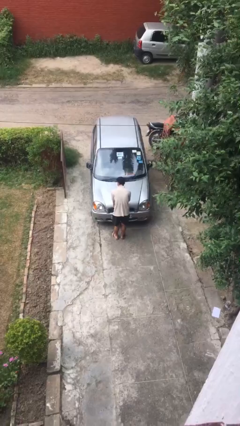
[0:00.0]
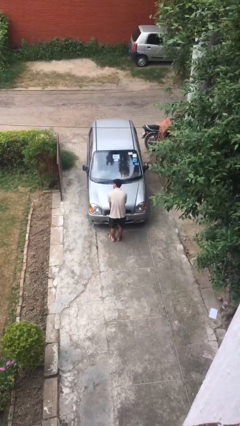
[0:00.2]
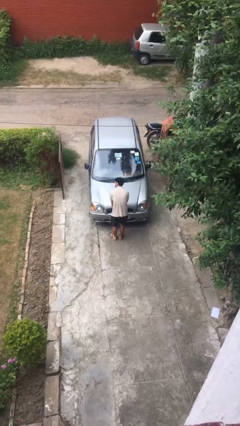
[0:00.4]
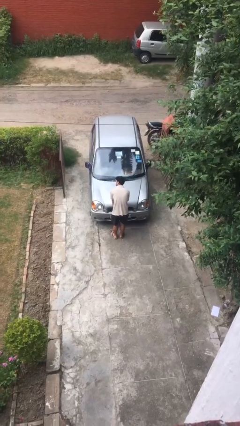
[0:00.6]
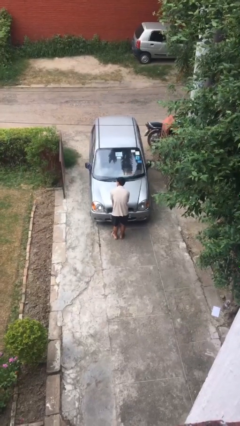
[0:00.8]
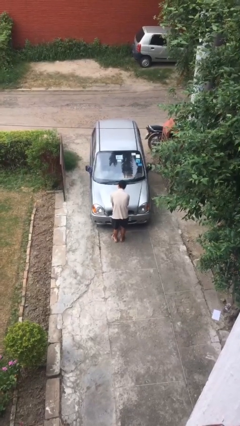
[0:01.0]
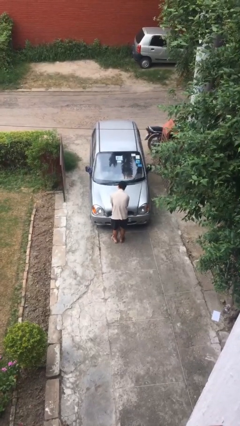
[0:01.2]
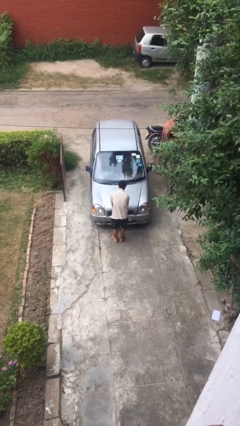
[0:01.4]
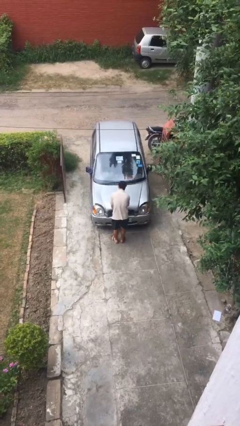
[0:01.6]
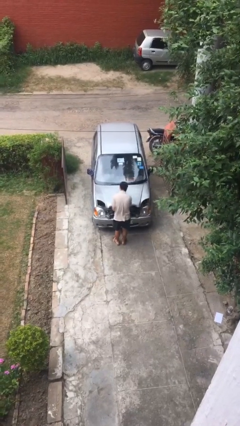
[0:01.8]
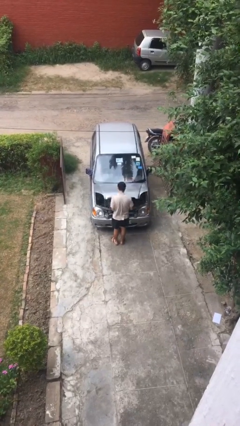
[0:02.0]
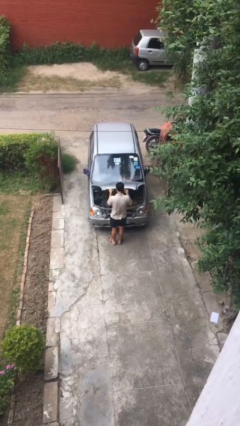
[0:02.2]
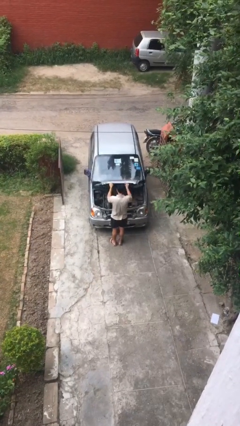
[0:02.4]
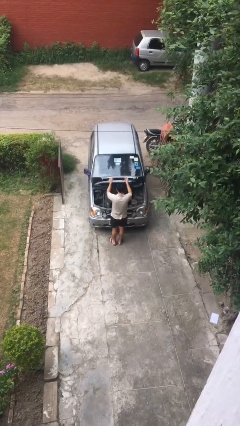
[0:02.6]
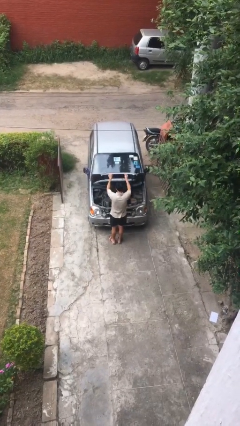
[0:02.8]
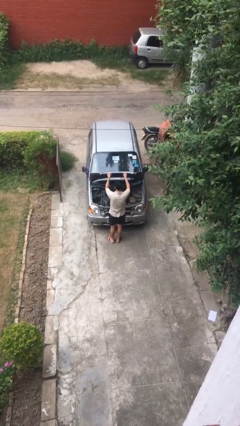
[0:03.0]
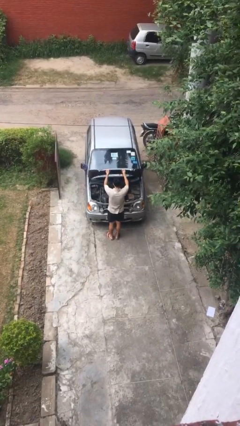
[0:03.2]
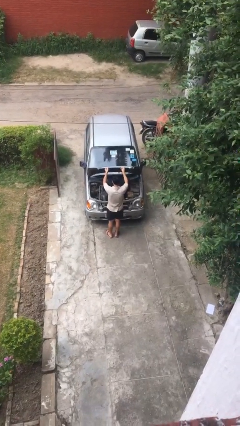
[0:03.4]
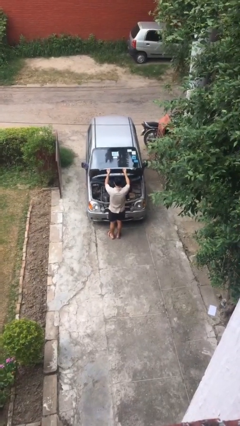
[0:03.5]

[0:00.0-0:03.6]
person opens car hood

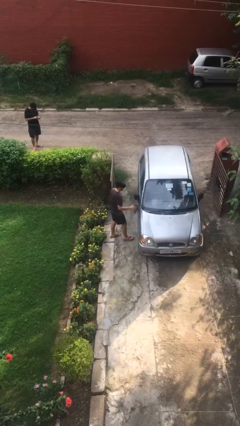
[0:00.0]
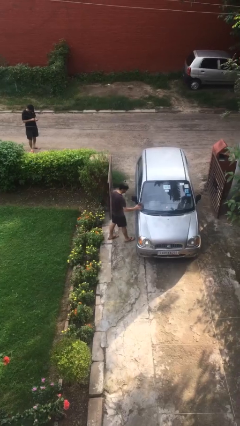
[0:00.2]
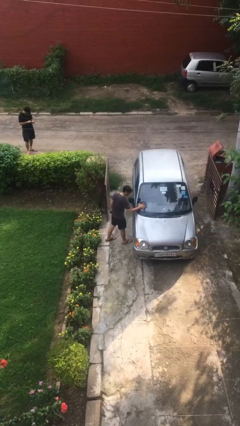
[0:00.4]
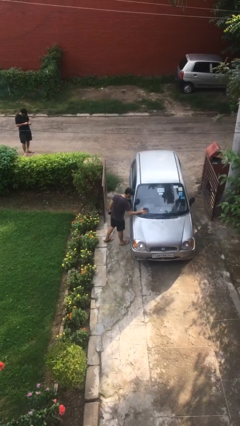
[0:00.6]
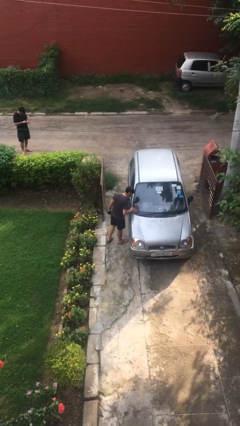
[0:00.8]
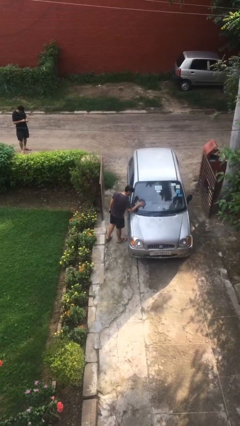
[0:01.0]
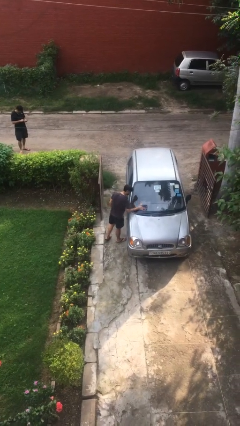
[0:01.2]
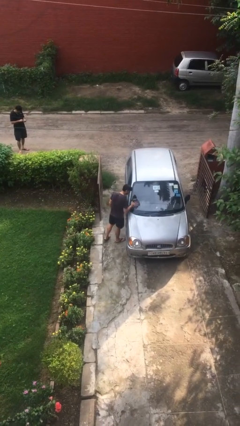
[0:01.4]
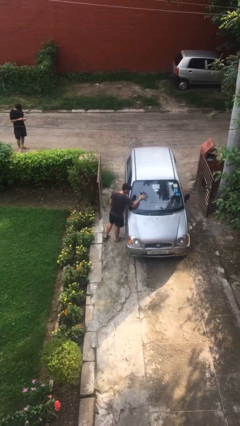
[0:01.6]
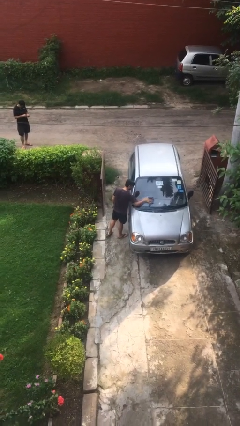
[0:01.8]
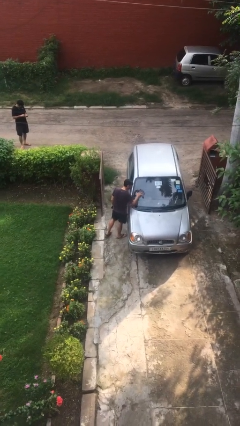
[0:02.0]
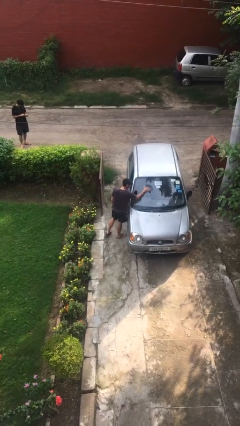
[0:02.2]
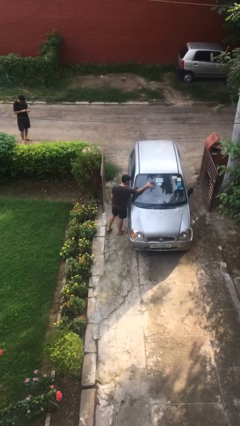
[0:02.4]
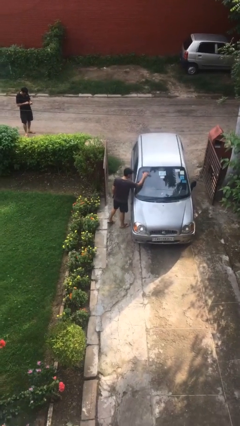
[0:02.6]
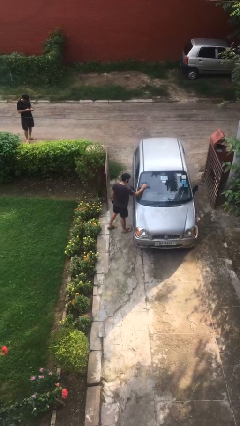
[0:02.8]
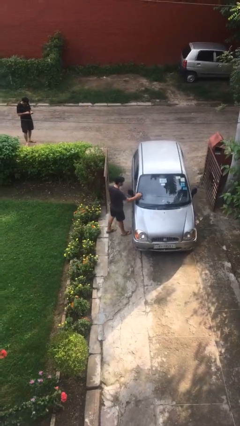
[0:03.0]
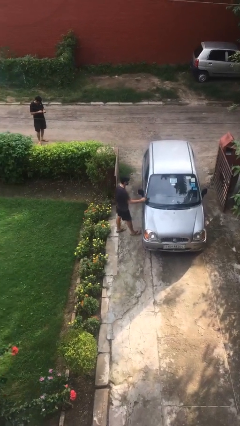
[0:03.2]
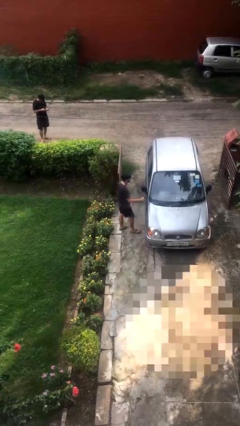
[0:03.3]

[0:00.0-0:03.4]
person polishes car with rag

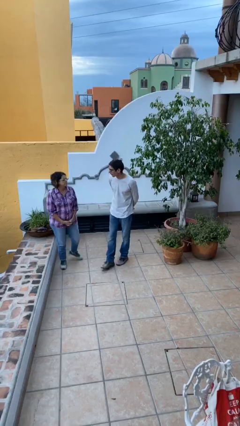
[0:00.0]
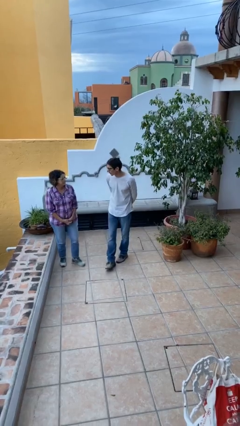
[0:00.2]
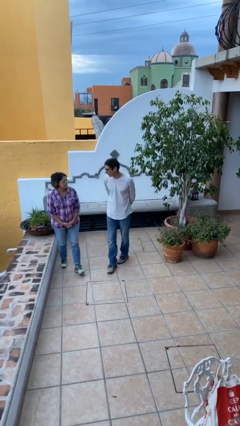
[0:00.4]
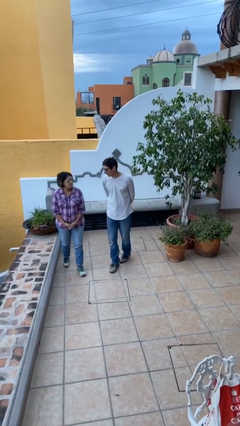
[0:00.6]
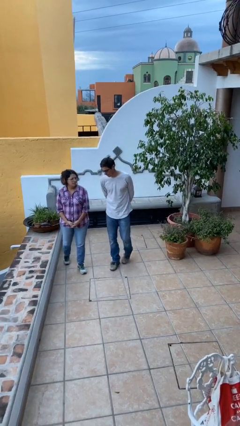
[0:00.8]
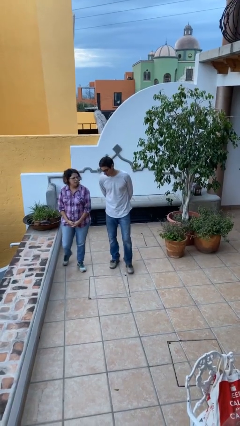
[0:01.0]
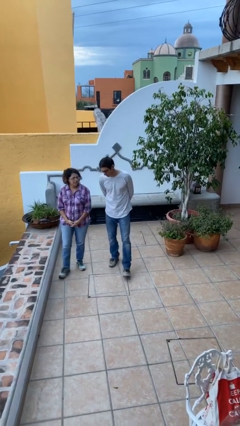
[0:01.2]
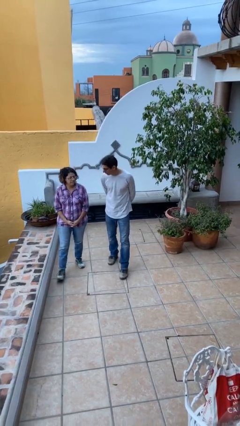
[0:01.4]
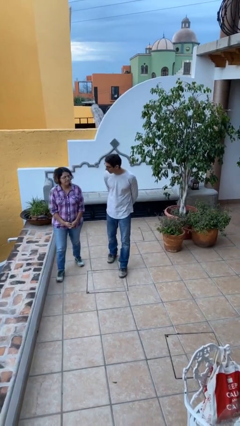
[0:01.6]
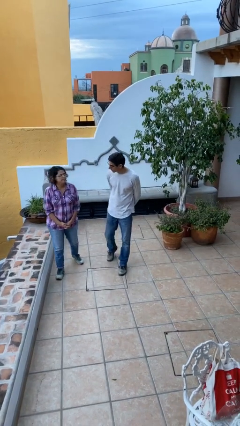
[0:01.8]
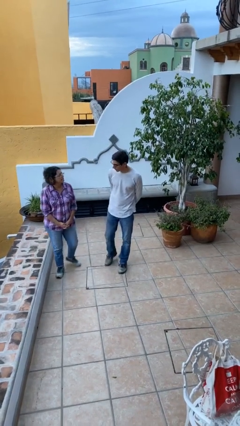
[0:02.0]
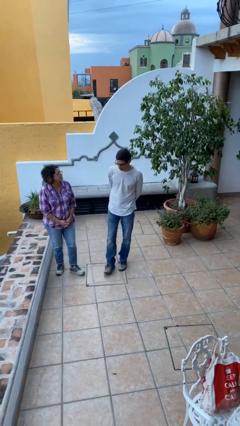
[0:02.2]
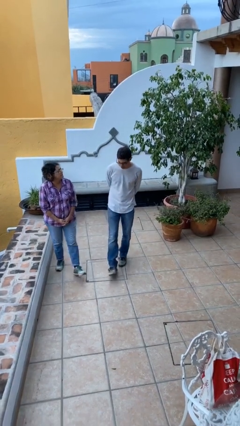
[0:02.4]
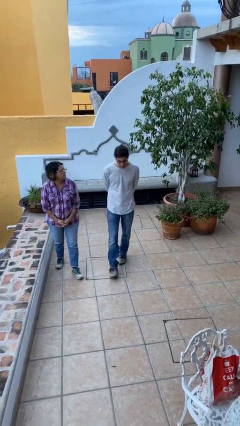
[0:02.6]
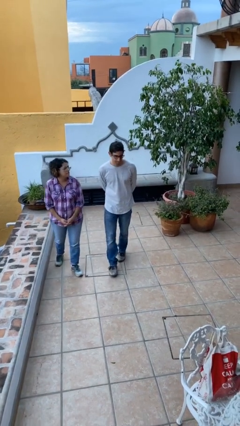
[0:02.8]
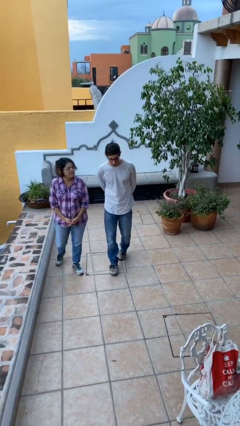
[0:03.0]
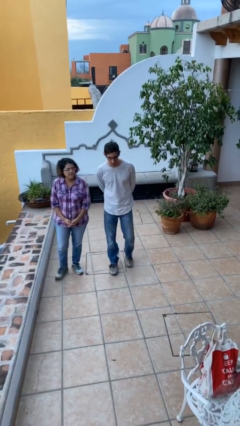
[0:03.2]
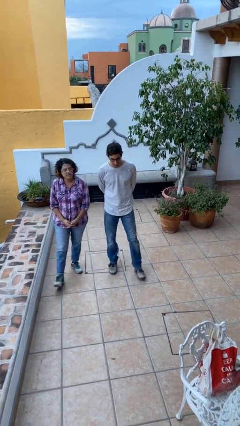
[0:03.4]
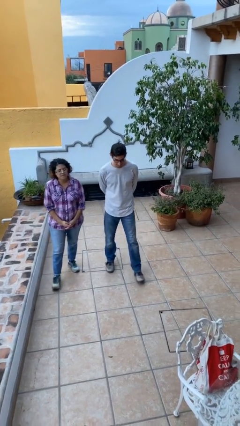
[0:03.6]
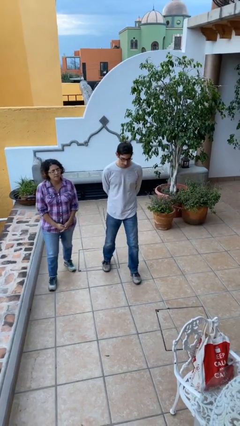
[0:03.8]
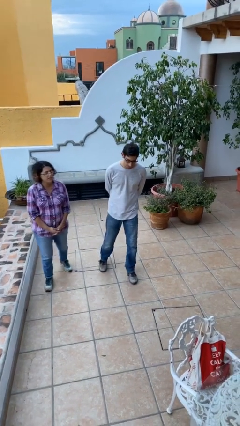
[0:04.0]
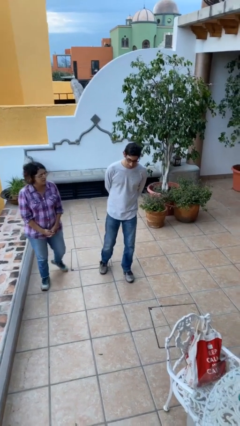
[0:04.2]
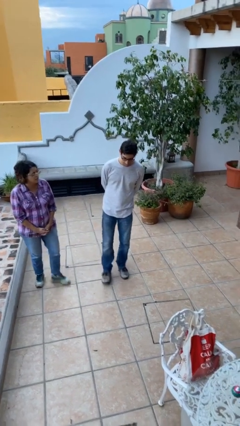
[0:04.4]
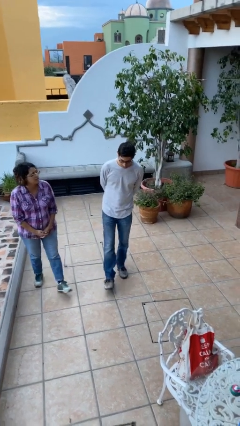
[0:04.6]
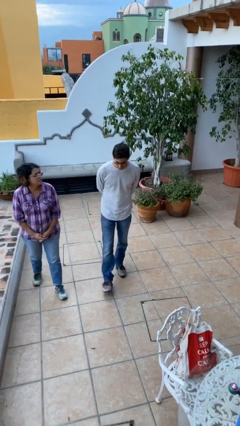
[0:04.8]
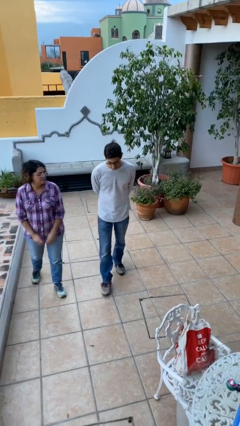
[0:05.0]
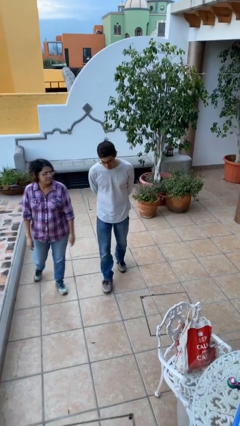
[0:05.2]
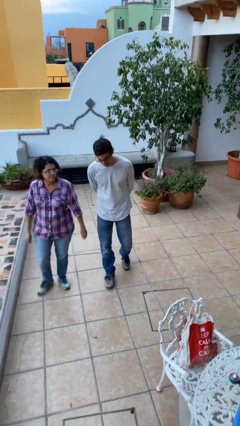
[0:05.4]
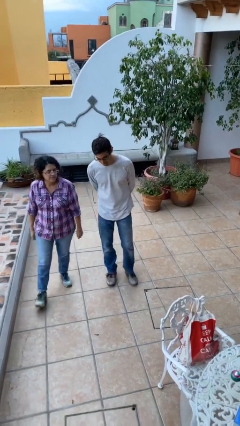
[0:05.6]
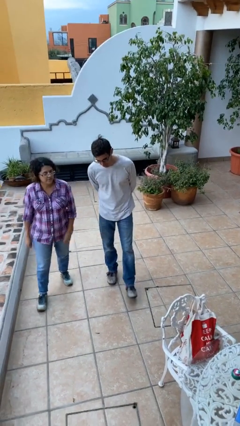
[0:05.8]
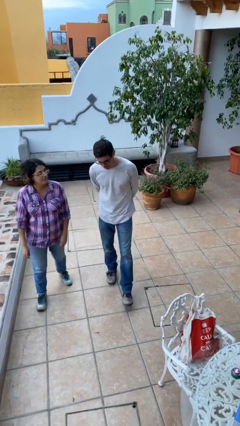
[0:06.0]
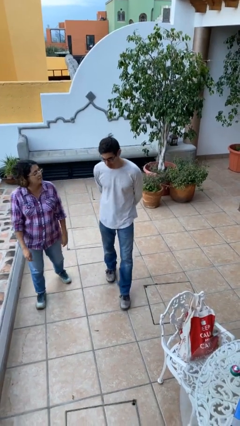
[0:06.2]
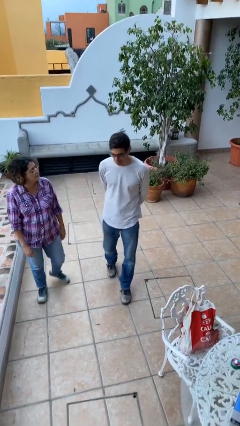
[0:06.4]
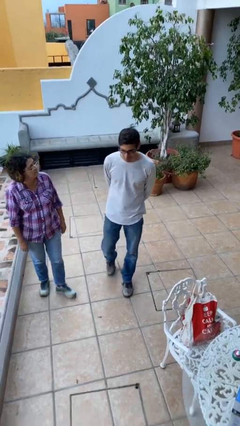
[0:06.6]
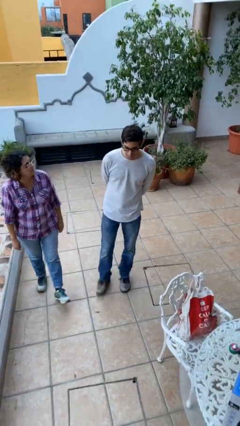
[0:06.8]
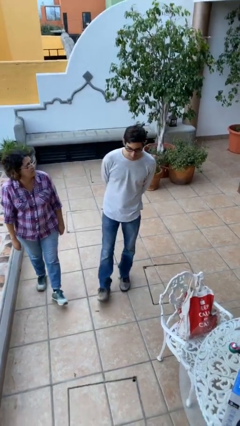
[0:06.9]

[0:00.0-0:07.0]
person talks to person

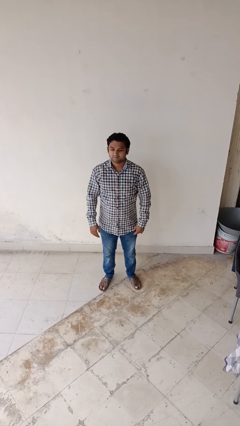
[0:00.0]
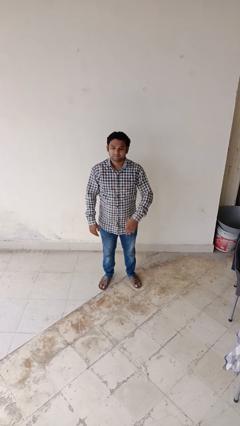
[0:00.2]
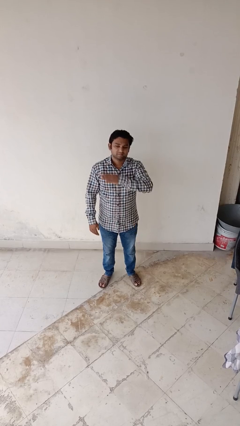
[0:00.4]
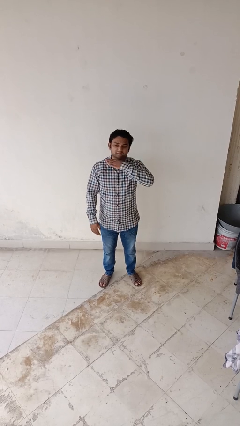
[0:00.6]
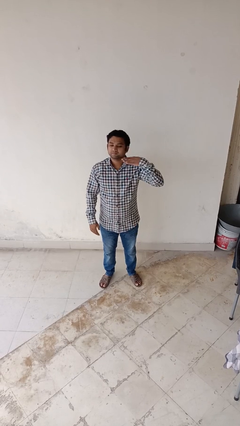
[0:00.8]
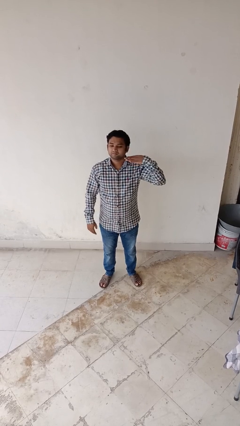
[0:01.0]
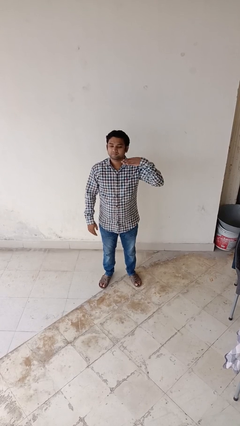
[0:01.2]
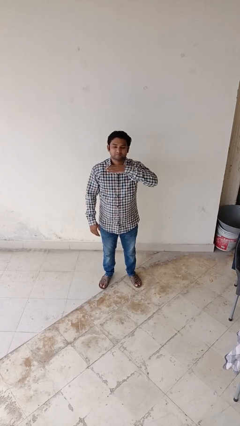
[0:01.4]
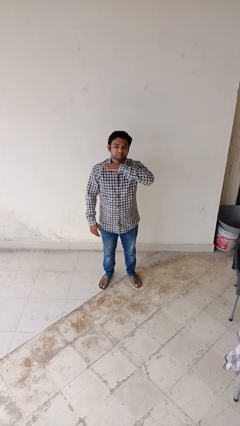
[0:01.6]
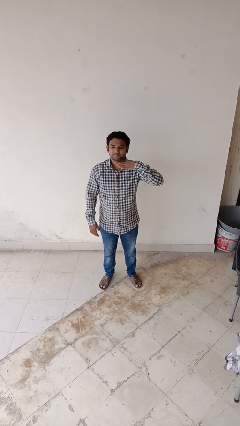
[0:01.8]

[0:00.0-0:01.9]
person gestures cut

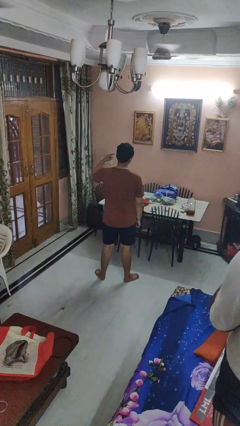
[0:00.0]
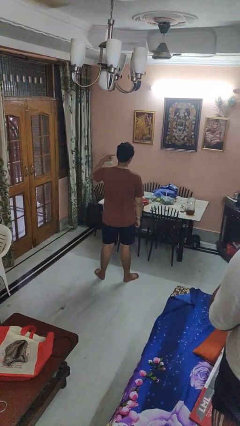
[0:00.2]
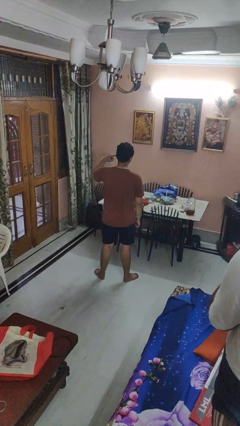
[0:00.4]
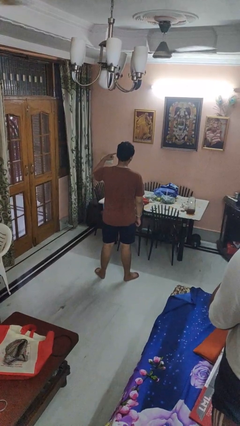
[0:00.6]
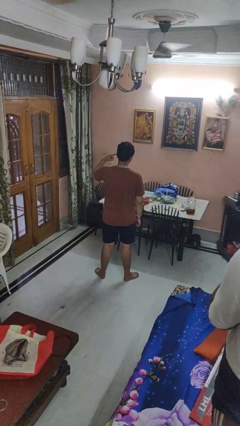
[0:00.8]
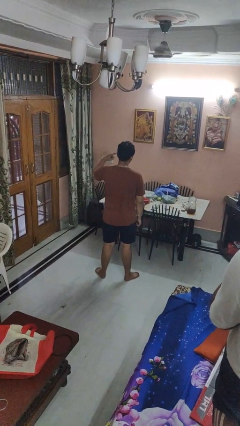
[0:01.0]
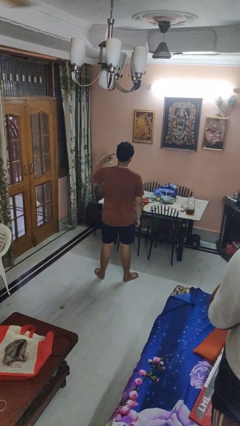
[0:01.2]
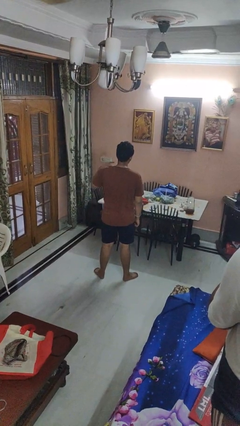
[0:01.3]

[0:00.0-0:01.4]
person gestures listen closely

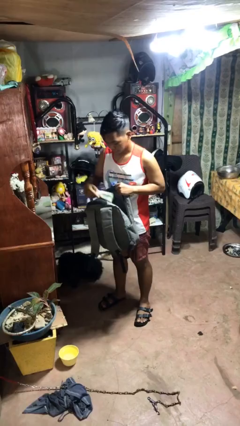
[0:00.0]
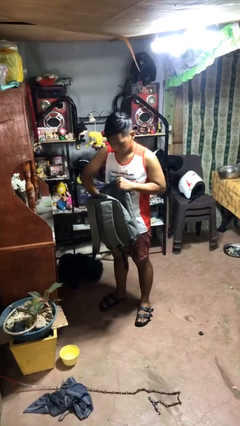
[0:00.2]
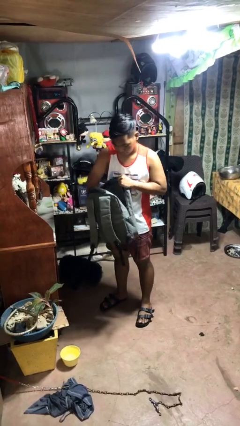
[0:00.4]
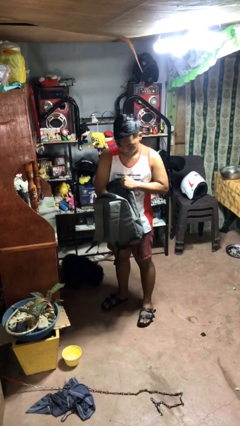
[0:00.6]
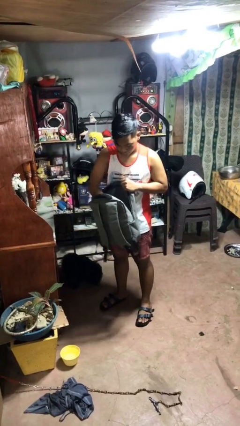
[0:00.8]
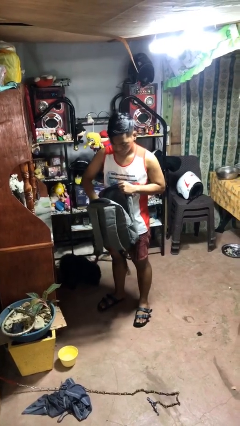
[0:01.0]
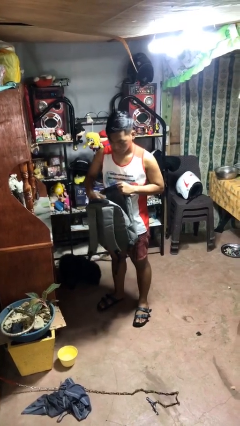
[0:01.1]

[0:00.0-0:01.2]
person puts object into bag
